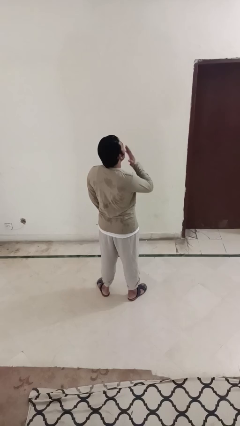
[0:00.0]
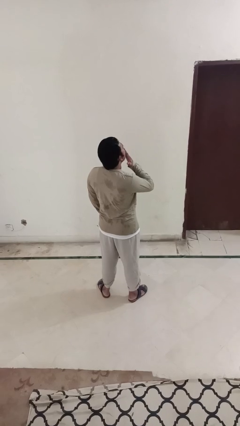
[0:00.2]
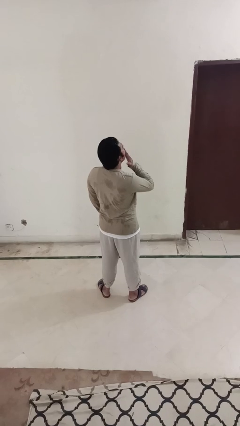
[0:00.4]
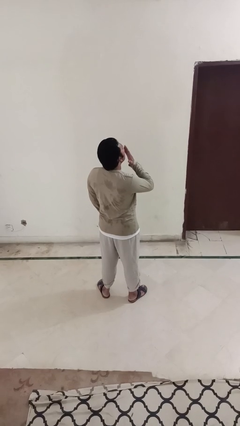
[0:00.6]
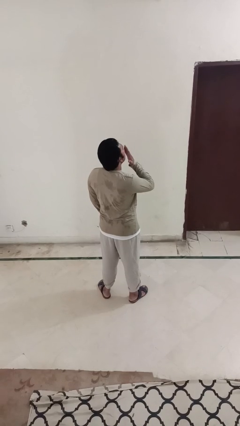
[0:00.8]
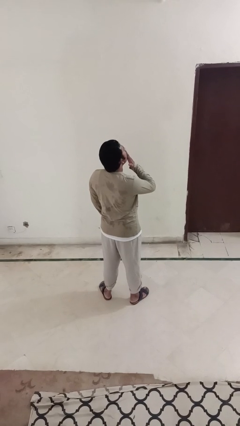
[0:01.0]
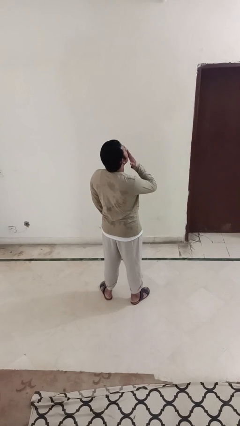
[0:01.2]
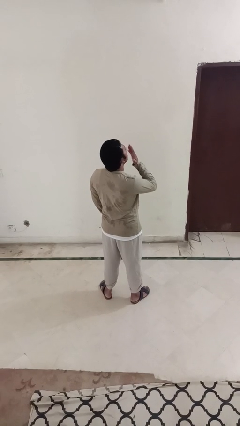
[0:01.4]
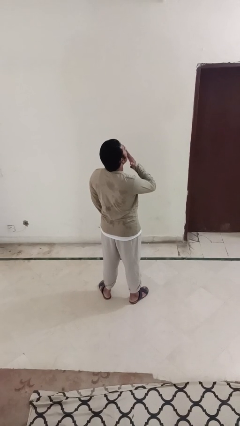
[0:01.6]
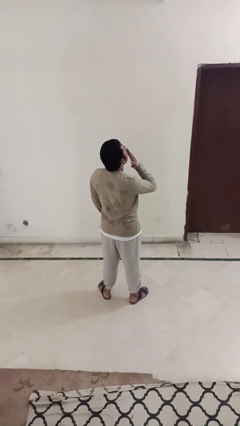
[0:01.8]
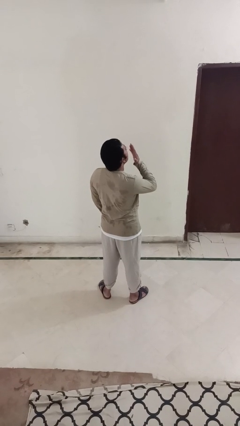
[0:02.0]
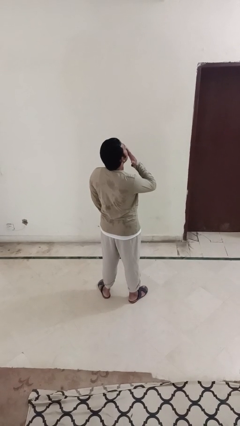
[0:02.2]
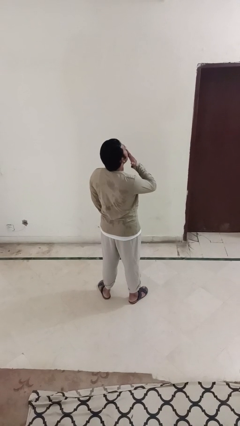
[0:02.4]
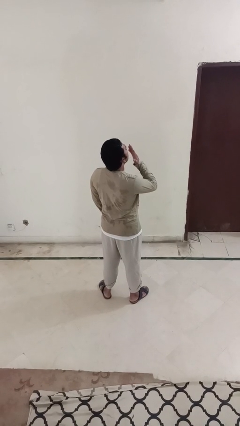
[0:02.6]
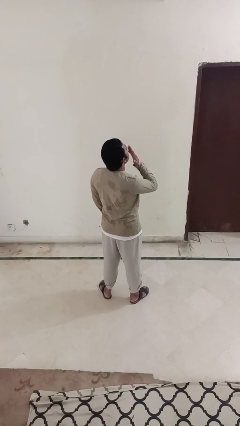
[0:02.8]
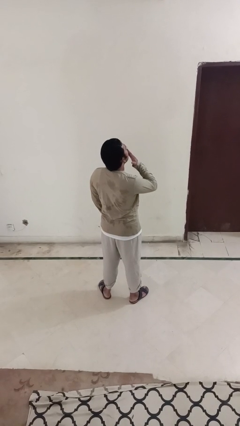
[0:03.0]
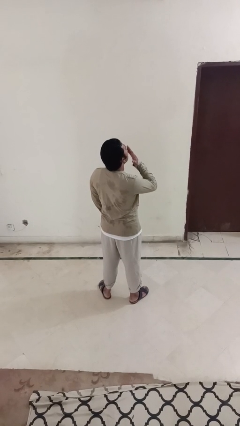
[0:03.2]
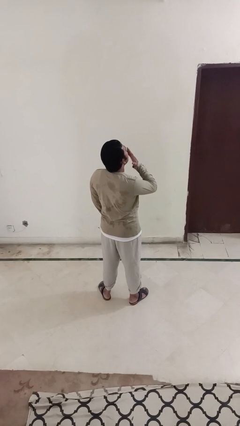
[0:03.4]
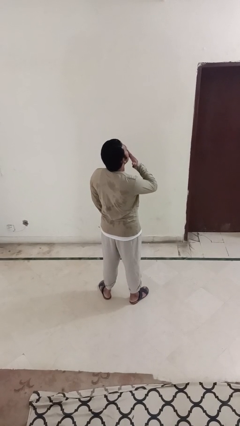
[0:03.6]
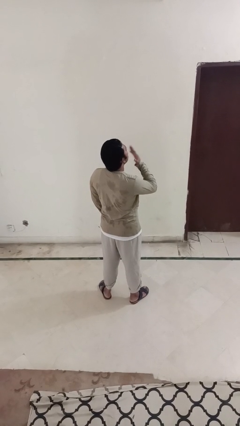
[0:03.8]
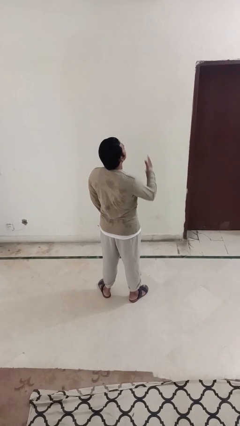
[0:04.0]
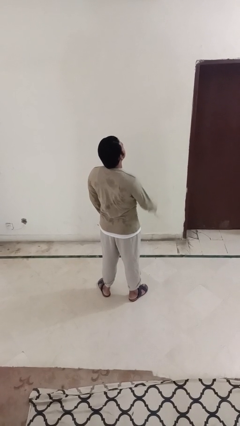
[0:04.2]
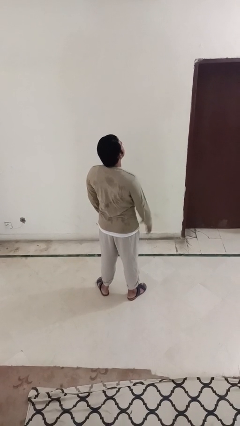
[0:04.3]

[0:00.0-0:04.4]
person yawns

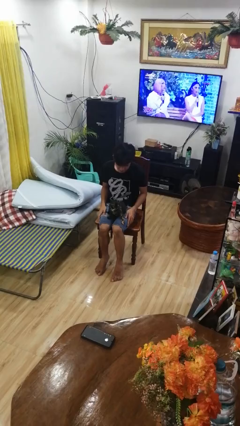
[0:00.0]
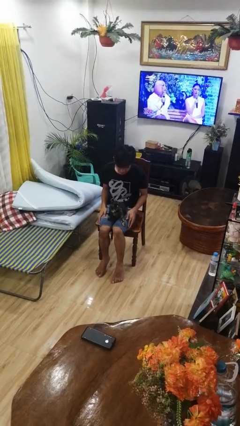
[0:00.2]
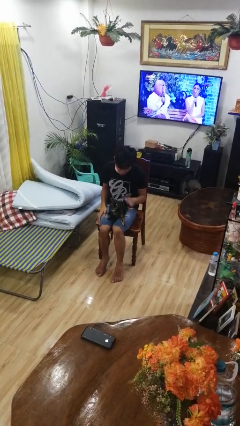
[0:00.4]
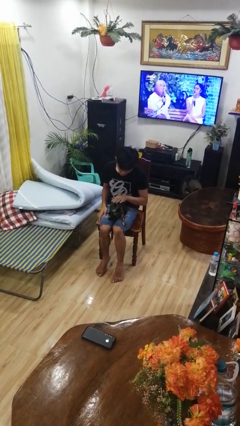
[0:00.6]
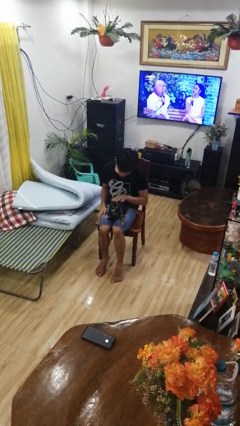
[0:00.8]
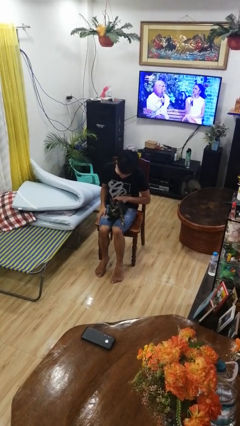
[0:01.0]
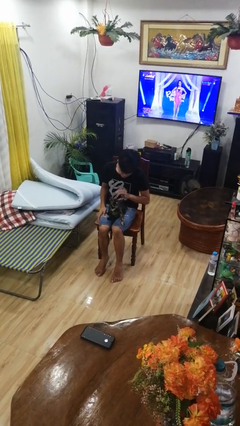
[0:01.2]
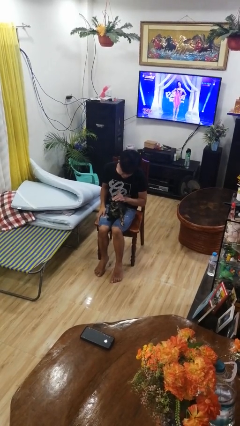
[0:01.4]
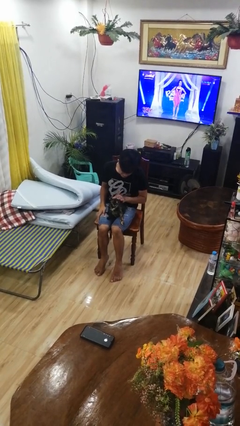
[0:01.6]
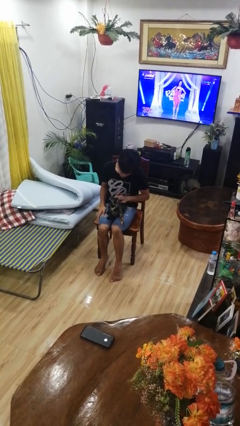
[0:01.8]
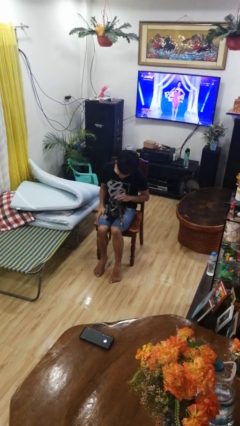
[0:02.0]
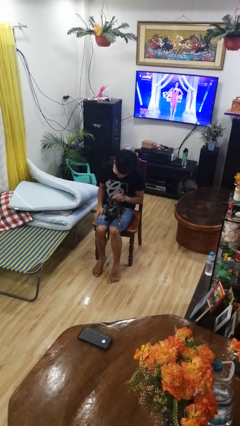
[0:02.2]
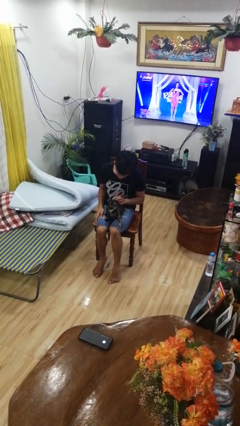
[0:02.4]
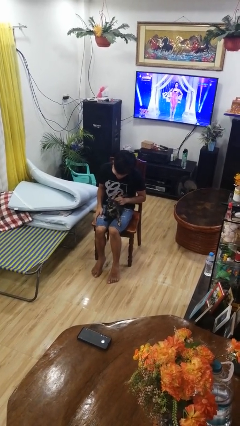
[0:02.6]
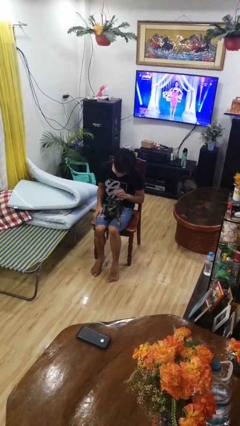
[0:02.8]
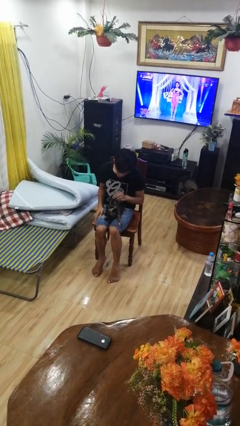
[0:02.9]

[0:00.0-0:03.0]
person pets cat

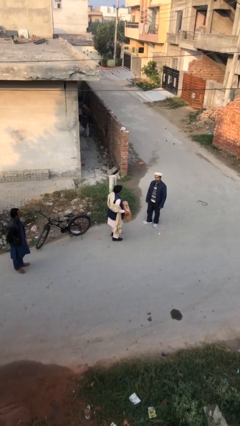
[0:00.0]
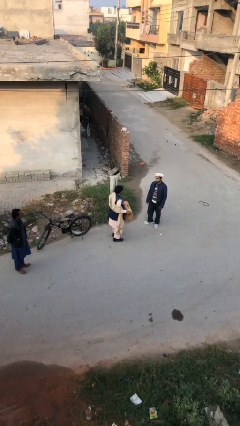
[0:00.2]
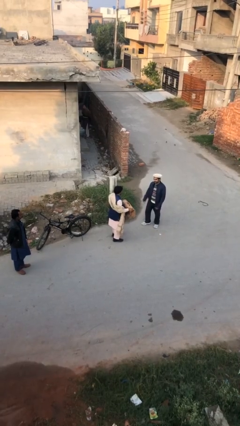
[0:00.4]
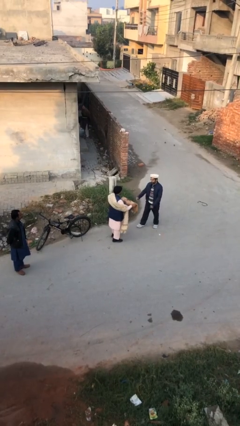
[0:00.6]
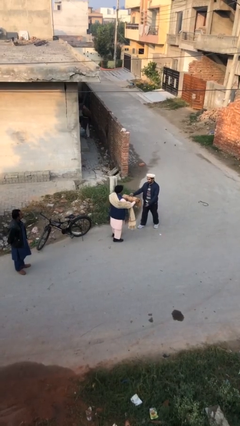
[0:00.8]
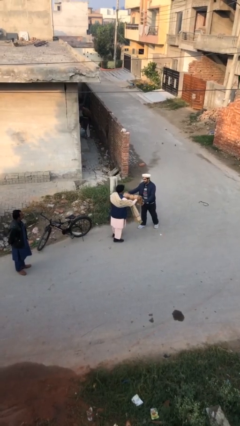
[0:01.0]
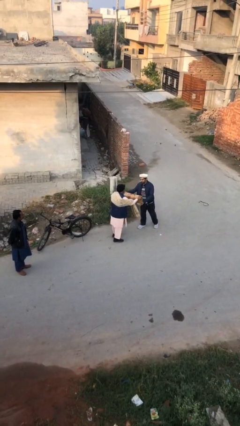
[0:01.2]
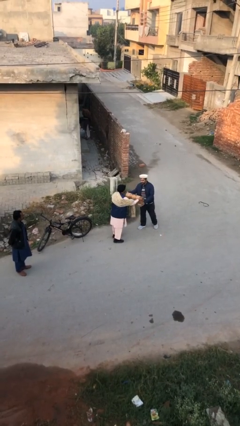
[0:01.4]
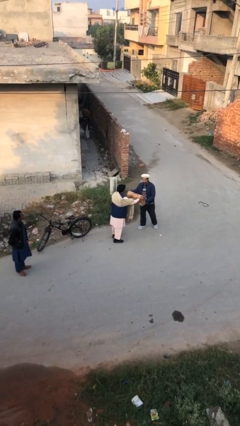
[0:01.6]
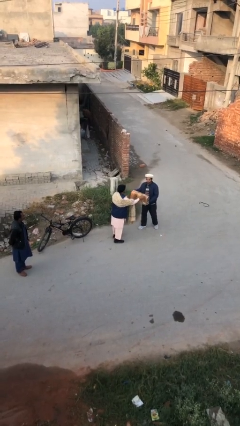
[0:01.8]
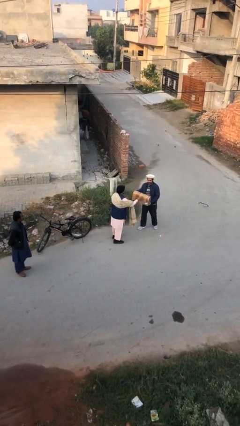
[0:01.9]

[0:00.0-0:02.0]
person transfers object to person

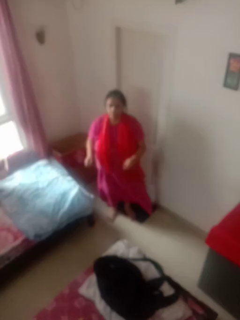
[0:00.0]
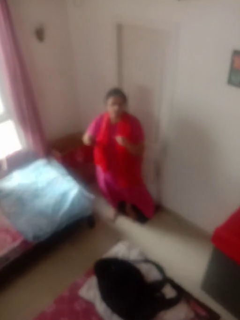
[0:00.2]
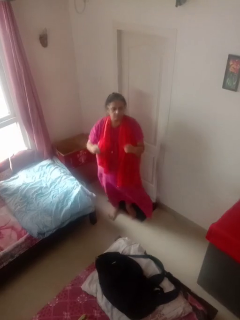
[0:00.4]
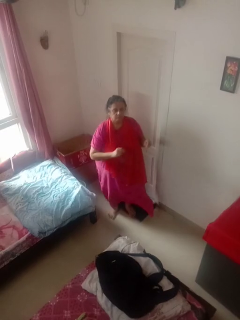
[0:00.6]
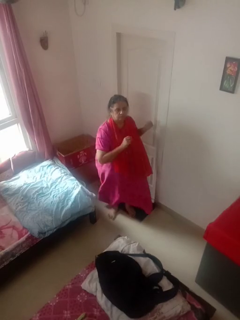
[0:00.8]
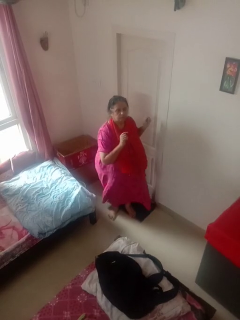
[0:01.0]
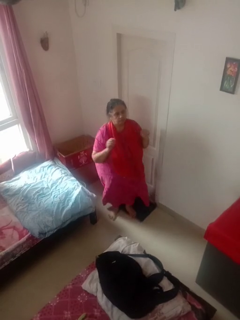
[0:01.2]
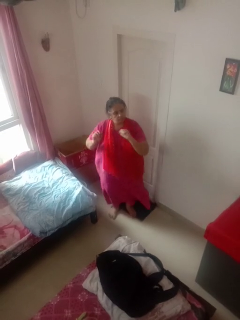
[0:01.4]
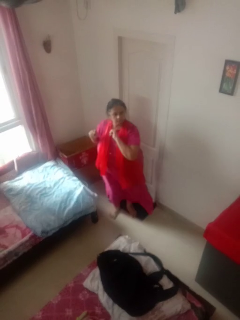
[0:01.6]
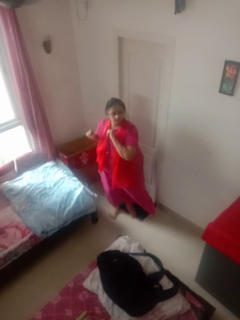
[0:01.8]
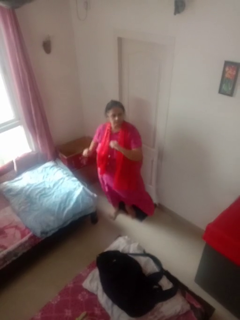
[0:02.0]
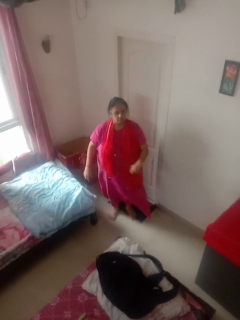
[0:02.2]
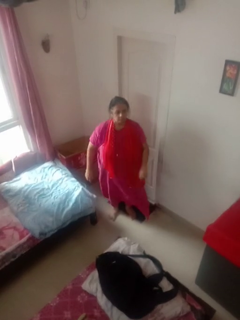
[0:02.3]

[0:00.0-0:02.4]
person dances in place

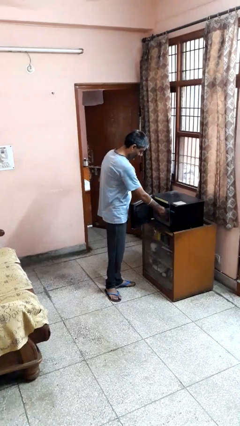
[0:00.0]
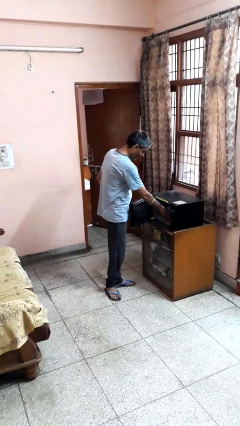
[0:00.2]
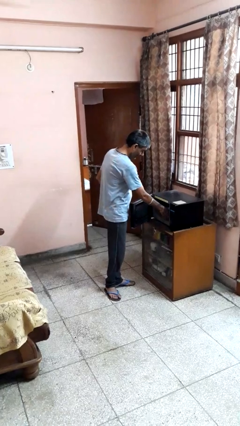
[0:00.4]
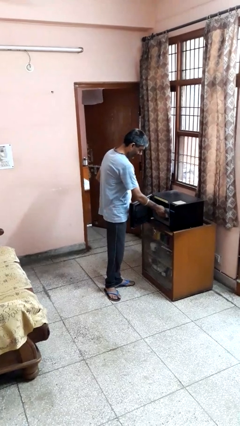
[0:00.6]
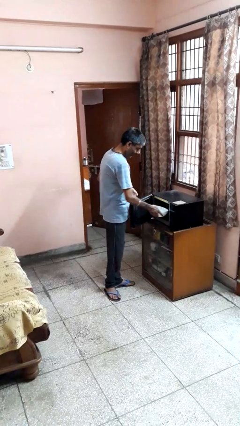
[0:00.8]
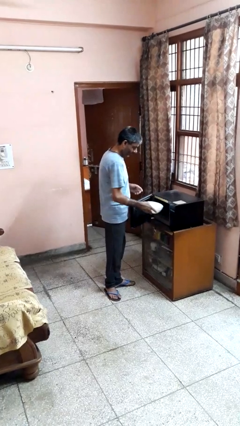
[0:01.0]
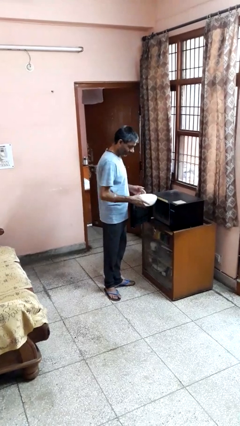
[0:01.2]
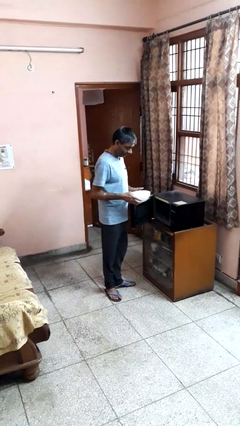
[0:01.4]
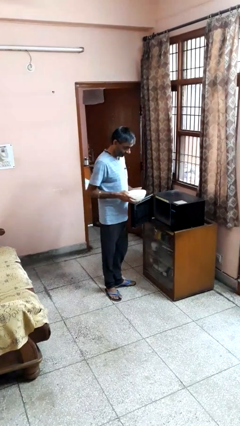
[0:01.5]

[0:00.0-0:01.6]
person takes object from microwave

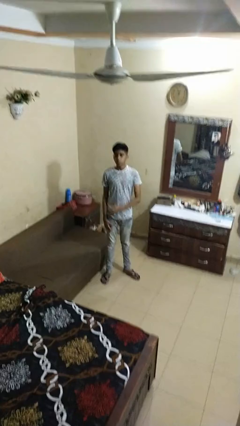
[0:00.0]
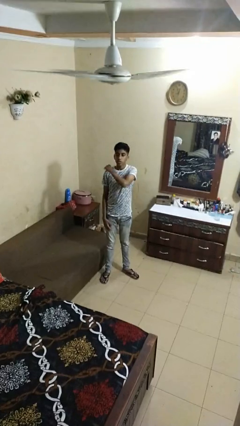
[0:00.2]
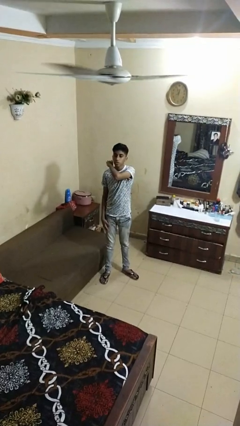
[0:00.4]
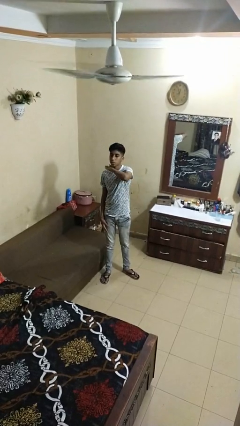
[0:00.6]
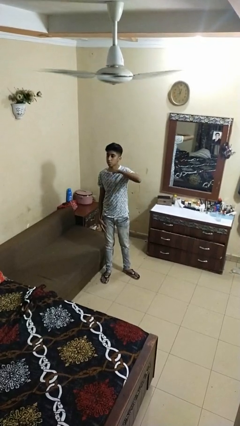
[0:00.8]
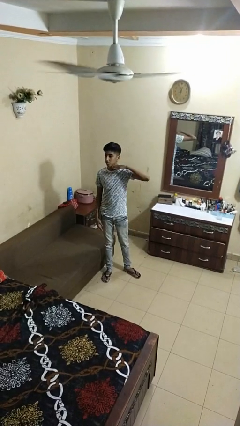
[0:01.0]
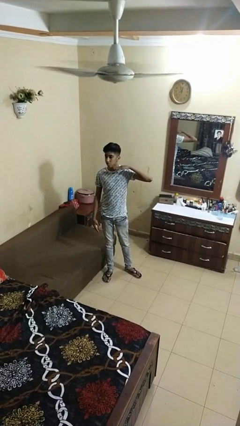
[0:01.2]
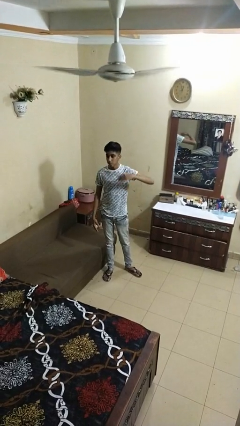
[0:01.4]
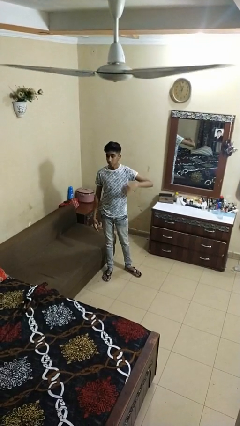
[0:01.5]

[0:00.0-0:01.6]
person gestures cut

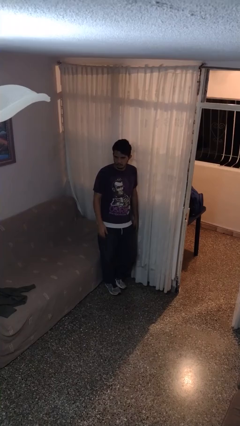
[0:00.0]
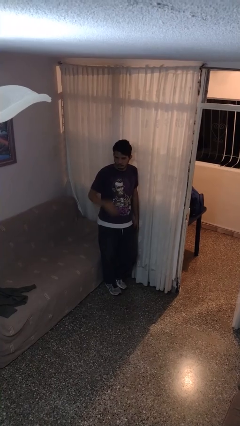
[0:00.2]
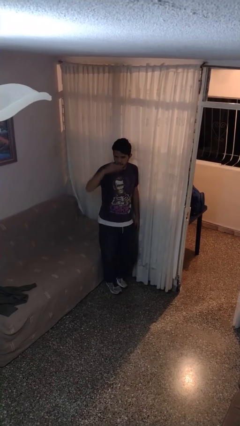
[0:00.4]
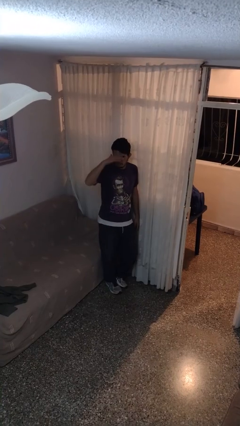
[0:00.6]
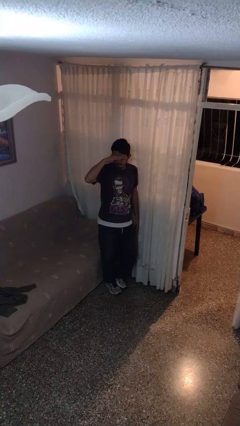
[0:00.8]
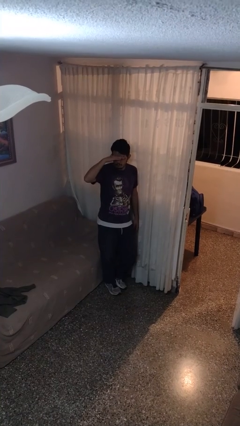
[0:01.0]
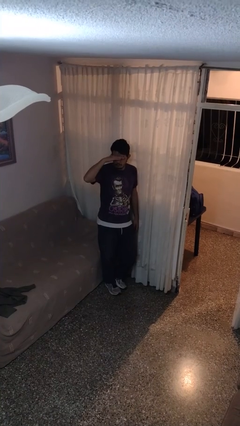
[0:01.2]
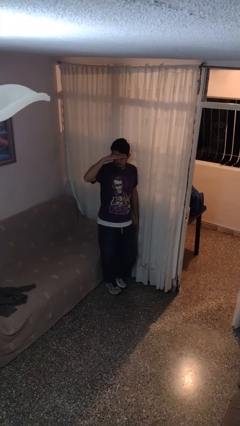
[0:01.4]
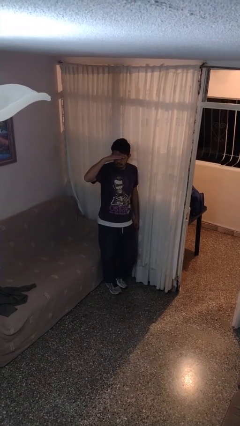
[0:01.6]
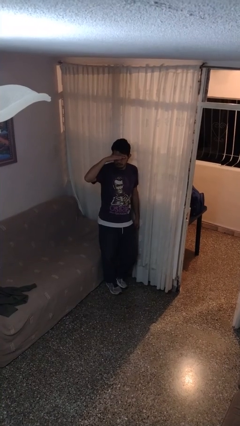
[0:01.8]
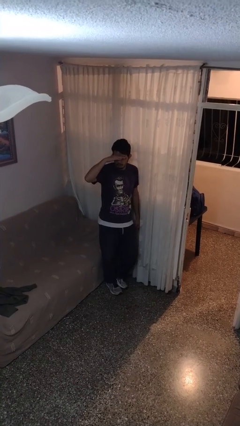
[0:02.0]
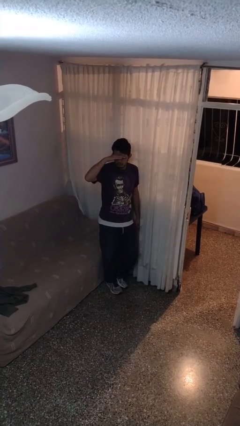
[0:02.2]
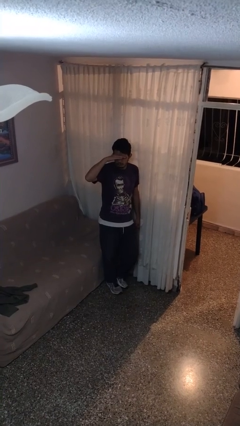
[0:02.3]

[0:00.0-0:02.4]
person shades eyes

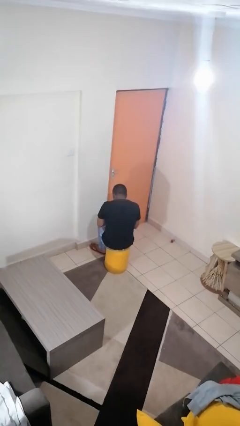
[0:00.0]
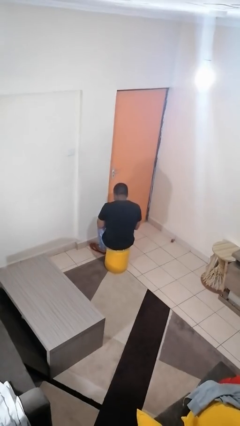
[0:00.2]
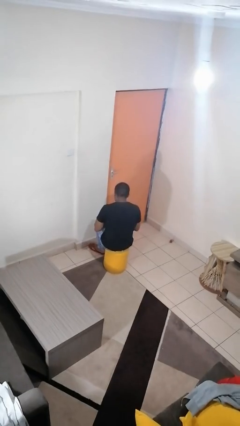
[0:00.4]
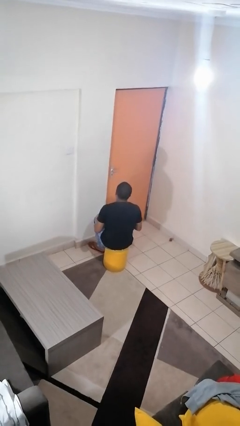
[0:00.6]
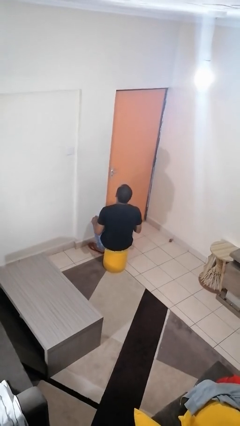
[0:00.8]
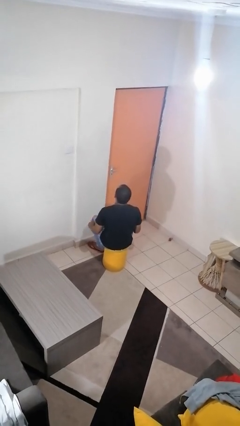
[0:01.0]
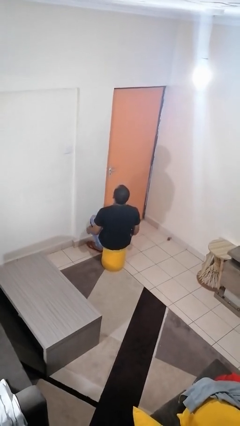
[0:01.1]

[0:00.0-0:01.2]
person sneezes into hand
